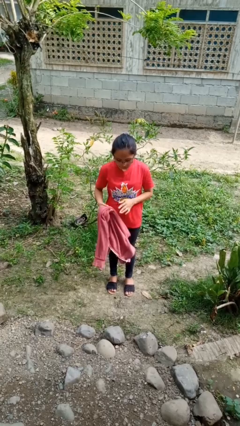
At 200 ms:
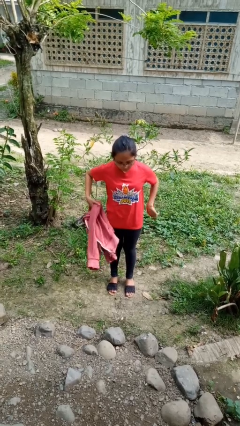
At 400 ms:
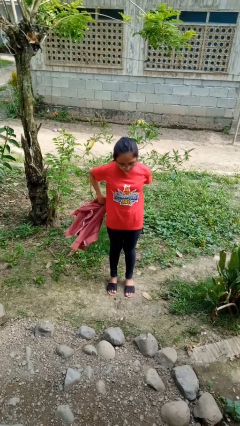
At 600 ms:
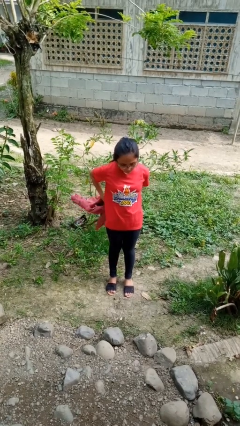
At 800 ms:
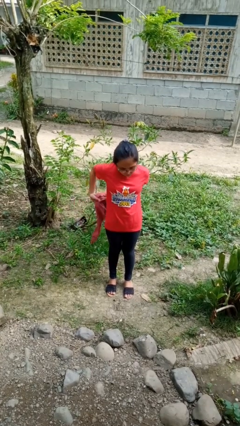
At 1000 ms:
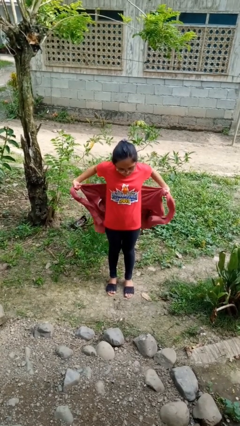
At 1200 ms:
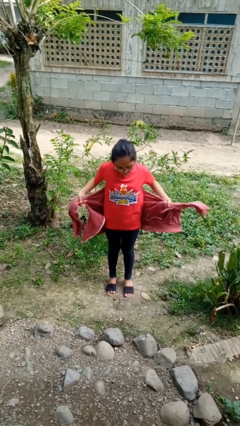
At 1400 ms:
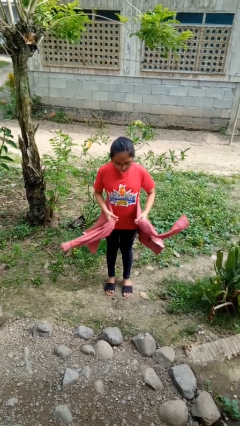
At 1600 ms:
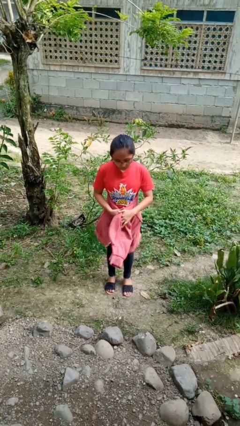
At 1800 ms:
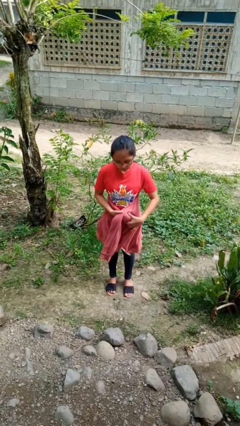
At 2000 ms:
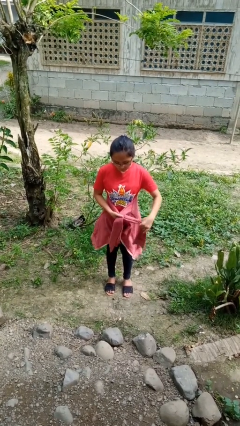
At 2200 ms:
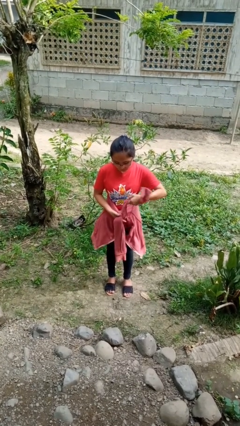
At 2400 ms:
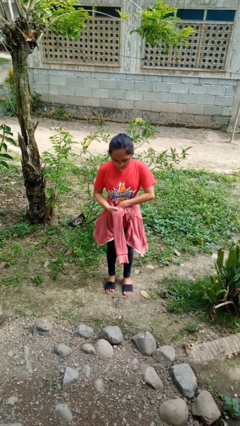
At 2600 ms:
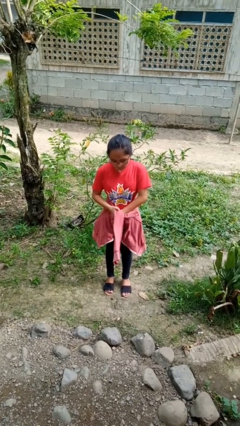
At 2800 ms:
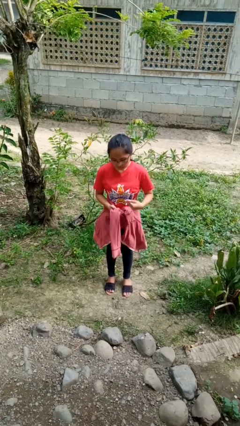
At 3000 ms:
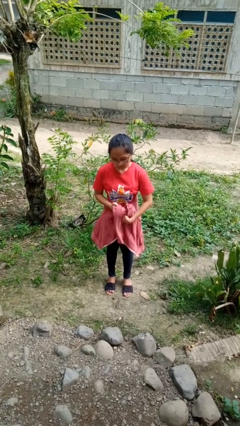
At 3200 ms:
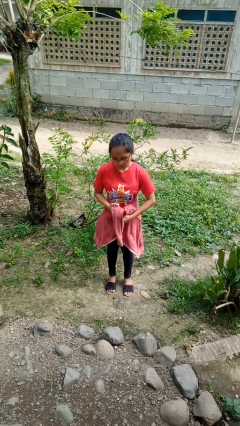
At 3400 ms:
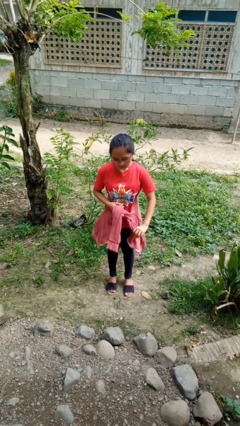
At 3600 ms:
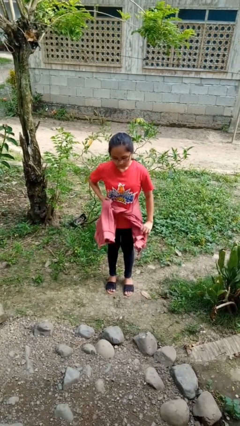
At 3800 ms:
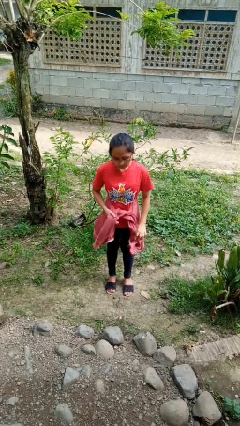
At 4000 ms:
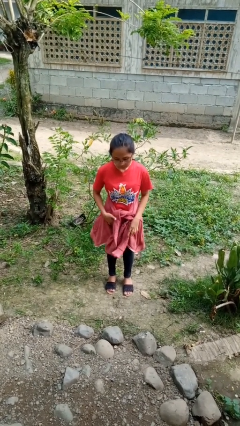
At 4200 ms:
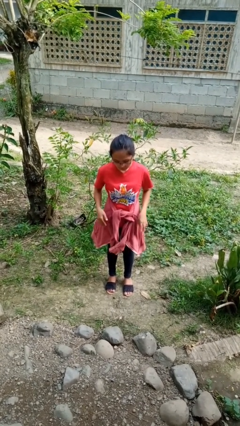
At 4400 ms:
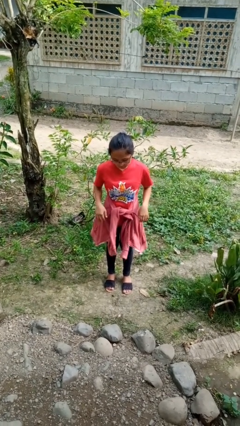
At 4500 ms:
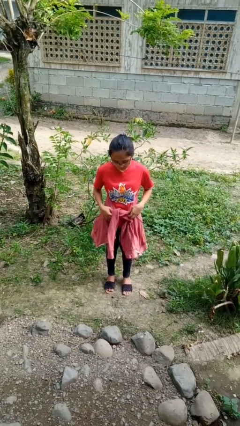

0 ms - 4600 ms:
person ties jacket around waist

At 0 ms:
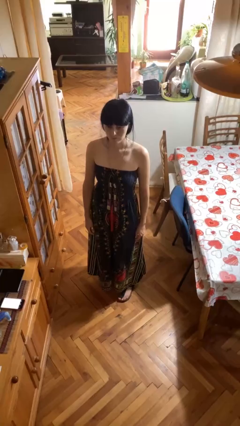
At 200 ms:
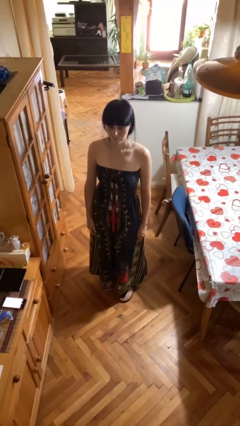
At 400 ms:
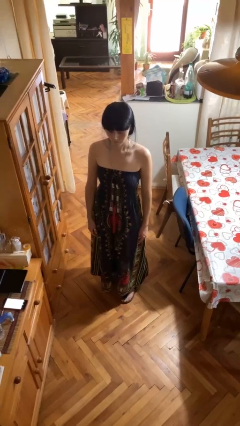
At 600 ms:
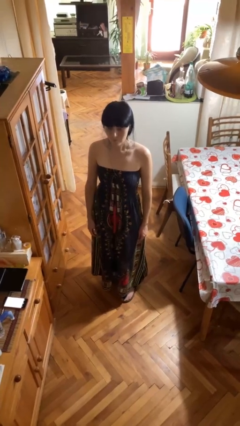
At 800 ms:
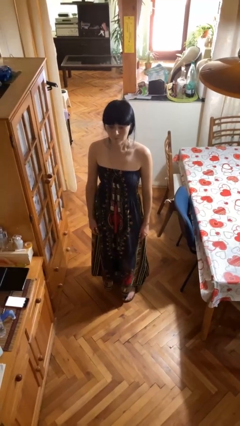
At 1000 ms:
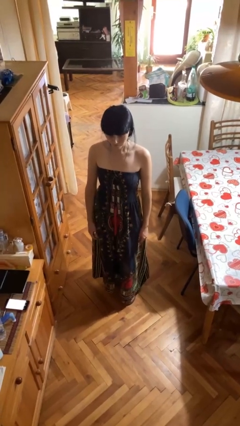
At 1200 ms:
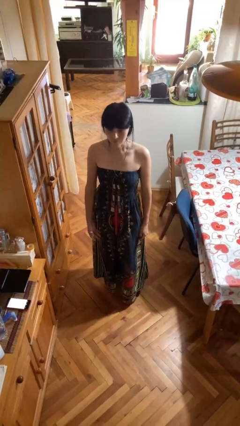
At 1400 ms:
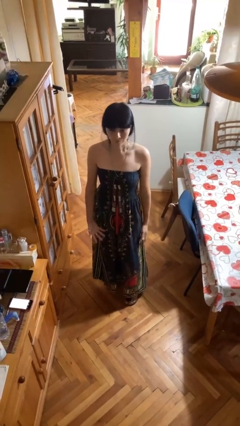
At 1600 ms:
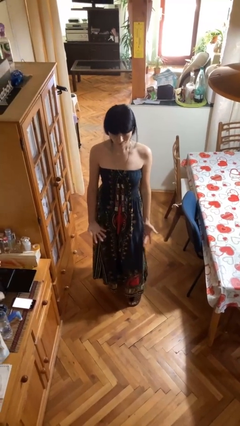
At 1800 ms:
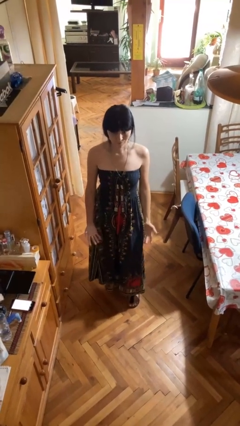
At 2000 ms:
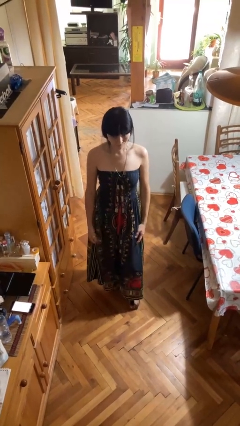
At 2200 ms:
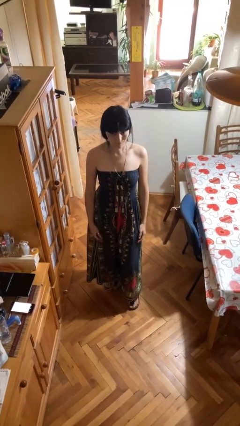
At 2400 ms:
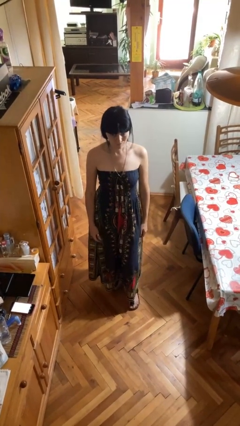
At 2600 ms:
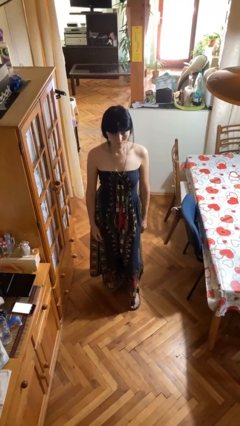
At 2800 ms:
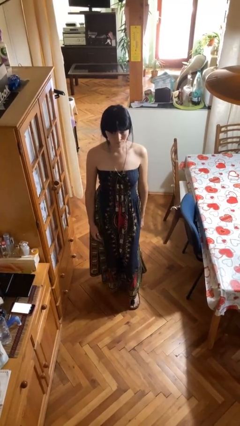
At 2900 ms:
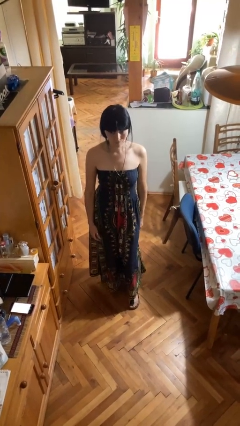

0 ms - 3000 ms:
person nods head

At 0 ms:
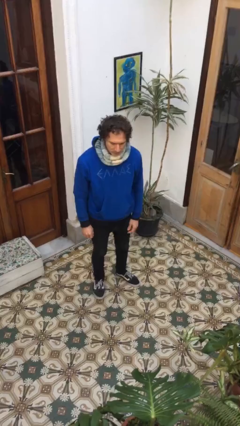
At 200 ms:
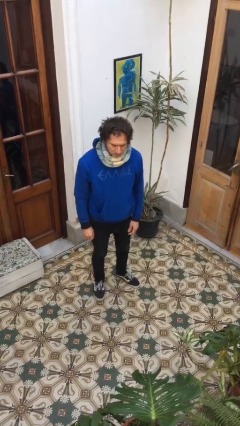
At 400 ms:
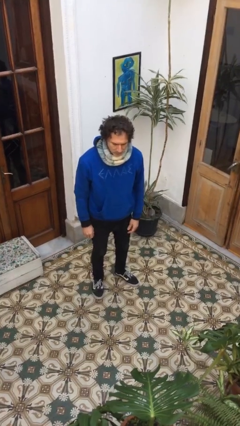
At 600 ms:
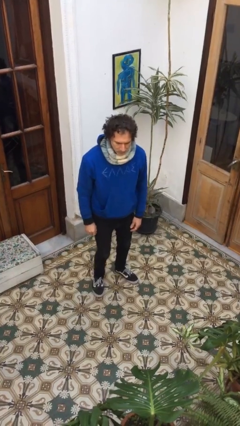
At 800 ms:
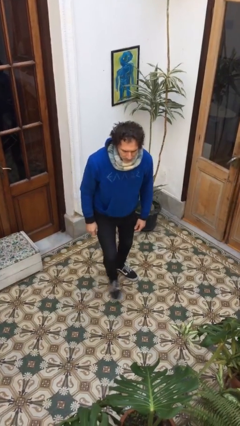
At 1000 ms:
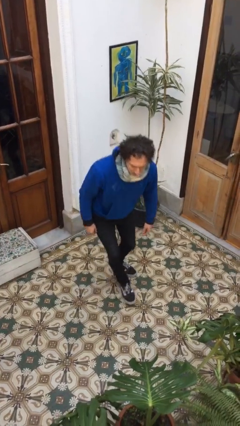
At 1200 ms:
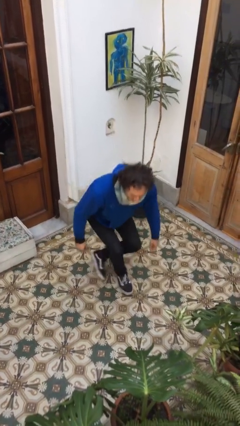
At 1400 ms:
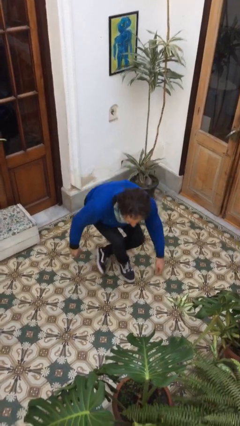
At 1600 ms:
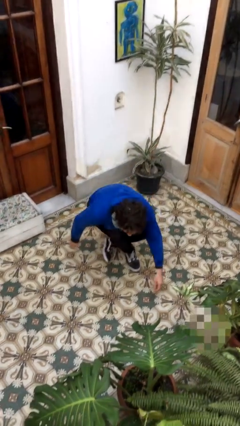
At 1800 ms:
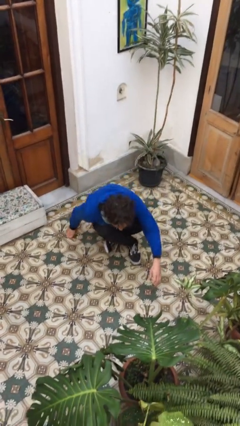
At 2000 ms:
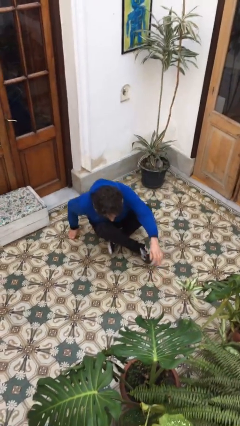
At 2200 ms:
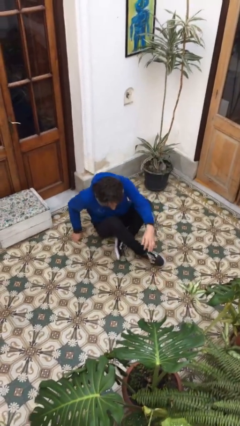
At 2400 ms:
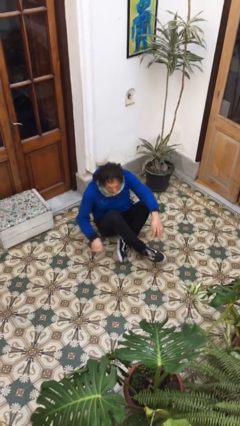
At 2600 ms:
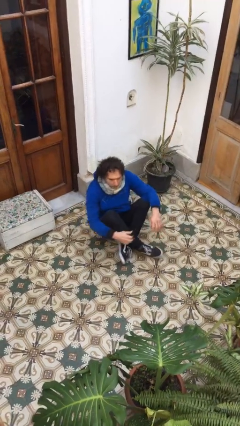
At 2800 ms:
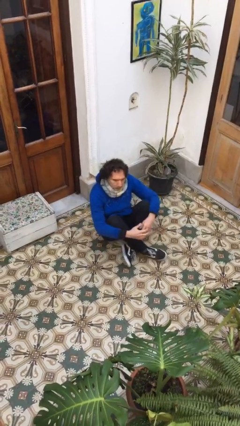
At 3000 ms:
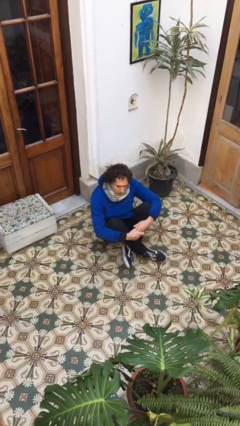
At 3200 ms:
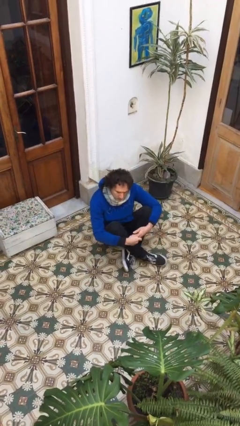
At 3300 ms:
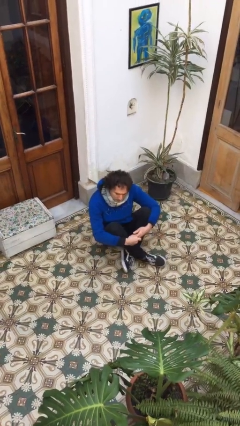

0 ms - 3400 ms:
person sits crisscross

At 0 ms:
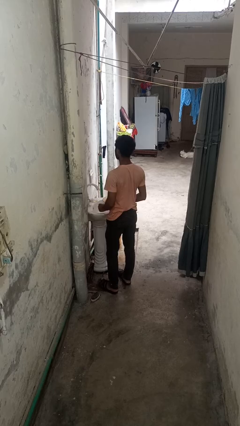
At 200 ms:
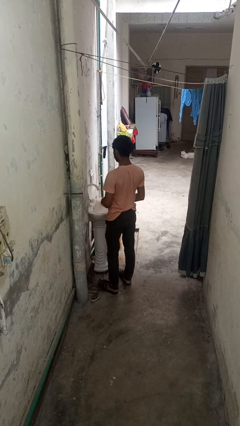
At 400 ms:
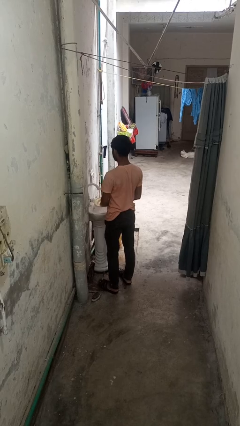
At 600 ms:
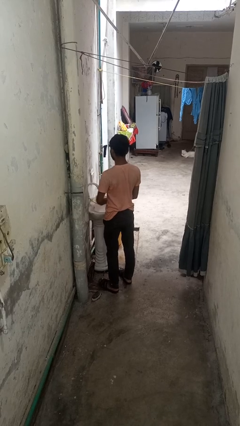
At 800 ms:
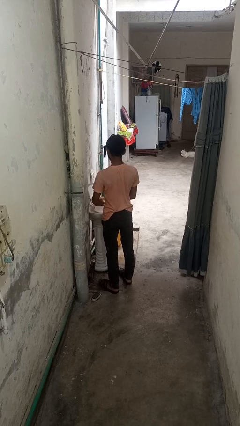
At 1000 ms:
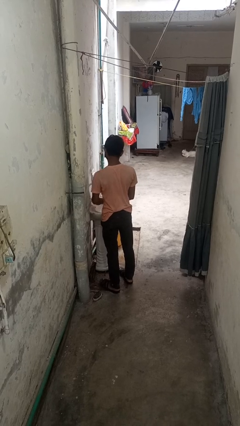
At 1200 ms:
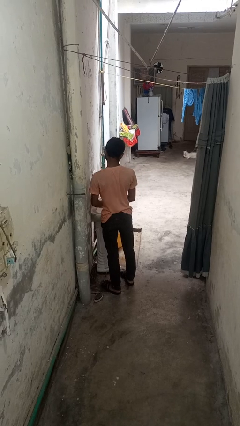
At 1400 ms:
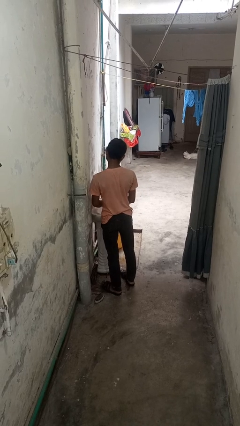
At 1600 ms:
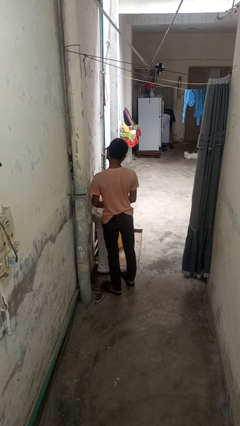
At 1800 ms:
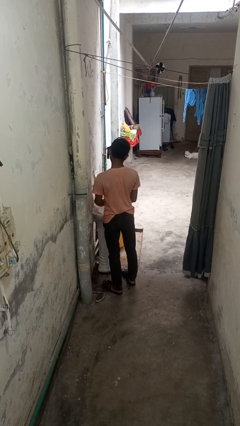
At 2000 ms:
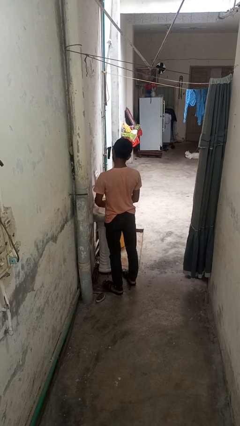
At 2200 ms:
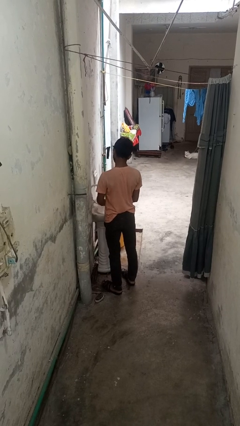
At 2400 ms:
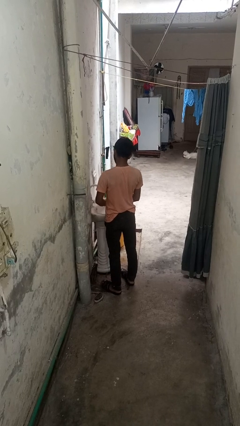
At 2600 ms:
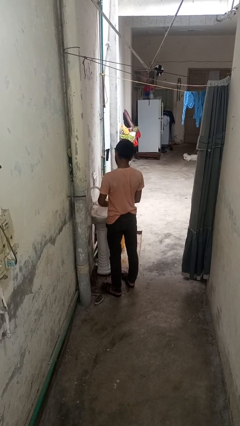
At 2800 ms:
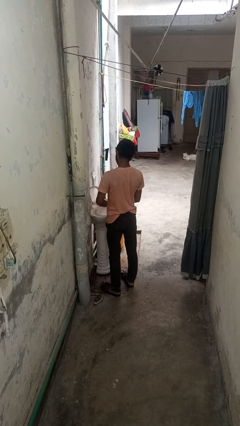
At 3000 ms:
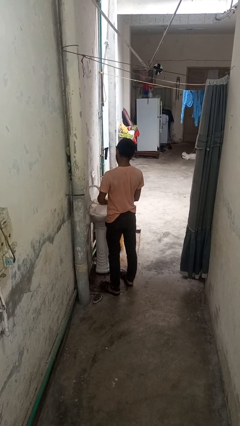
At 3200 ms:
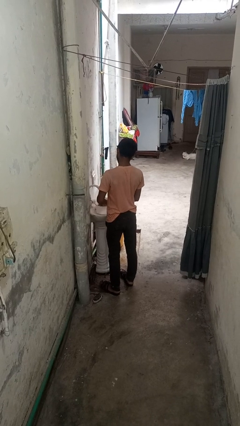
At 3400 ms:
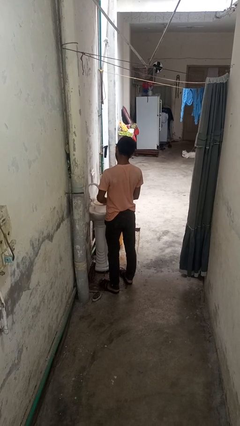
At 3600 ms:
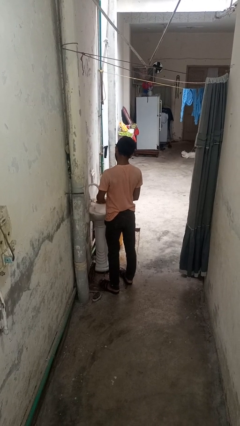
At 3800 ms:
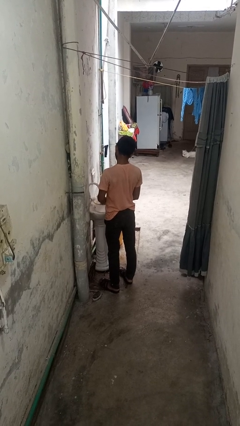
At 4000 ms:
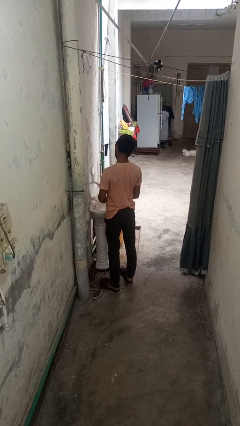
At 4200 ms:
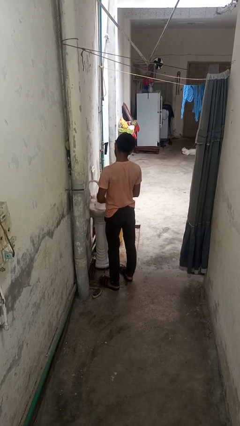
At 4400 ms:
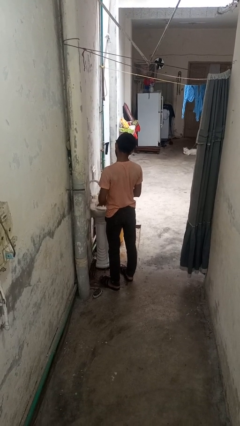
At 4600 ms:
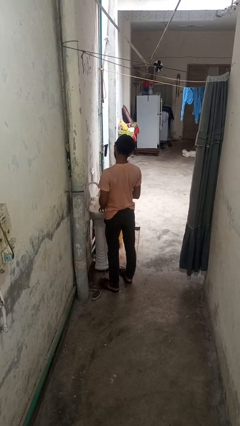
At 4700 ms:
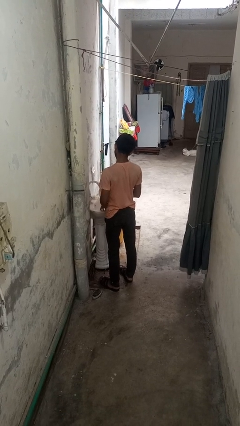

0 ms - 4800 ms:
person washes dish

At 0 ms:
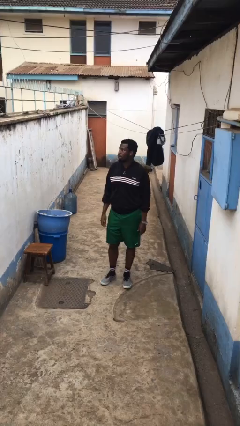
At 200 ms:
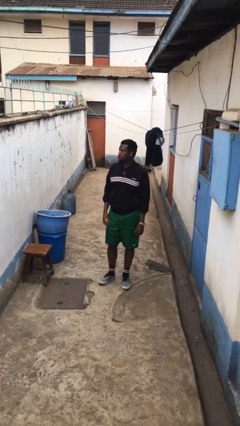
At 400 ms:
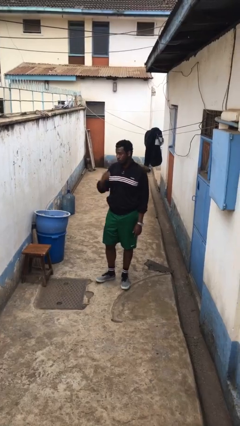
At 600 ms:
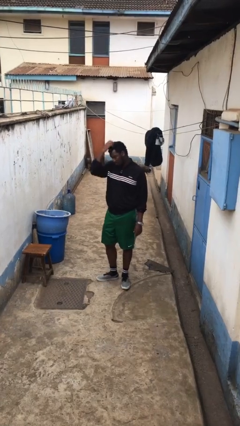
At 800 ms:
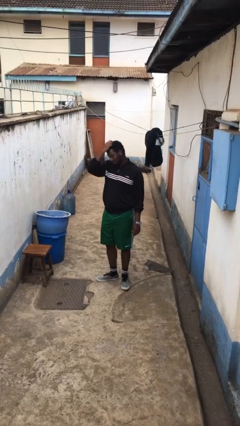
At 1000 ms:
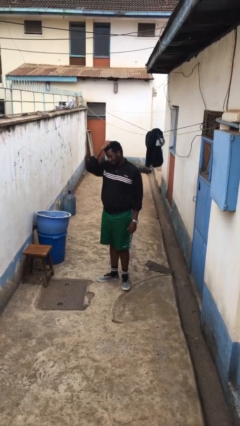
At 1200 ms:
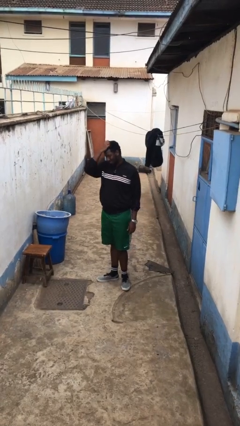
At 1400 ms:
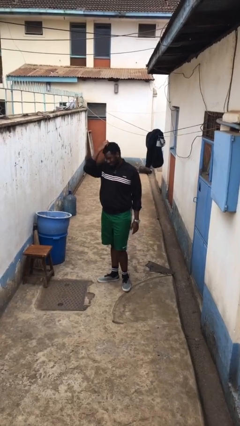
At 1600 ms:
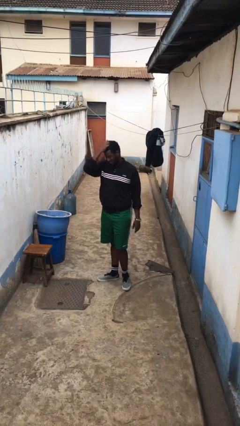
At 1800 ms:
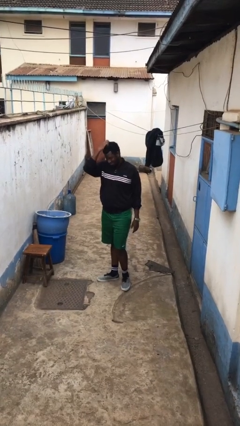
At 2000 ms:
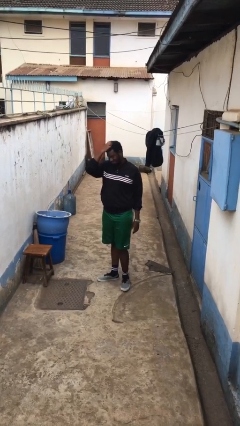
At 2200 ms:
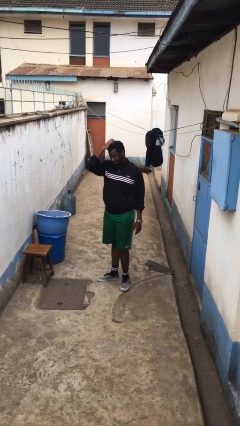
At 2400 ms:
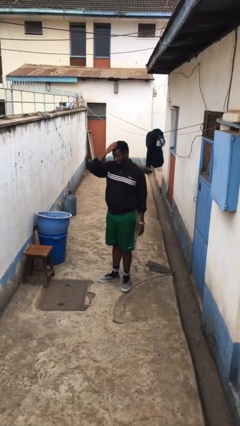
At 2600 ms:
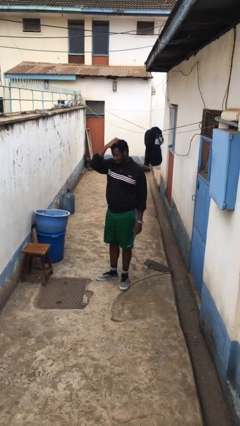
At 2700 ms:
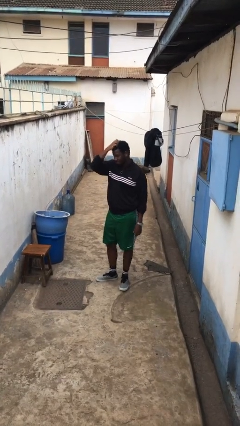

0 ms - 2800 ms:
person scratches face
